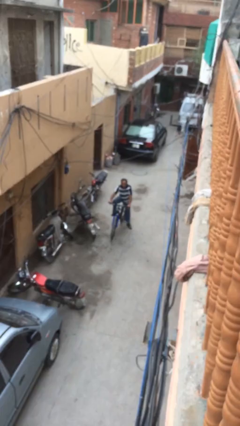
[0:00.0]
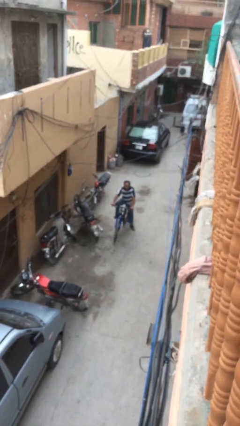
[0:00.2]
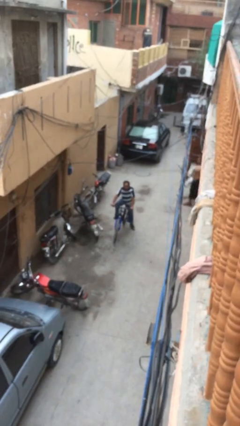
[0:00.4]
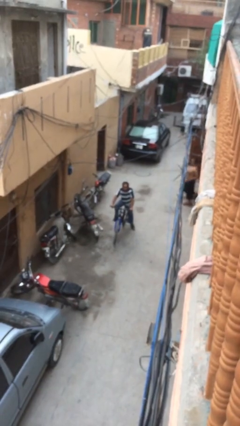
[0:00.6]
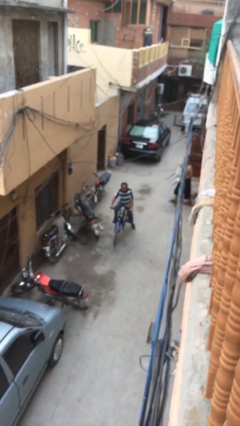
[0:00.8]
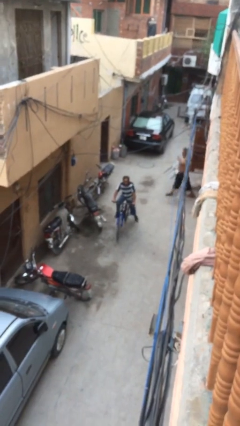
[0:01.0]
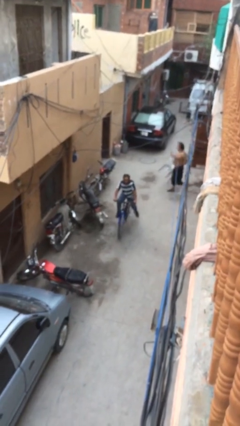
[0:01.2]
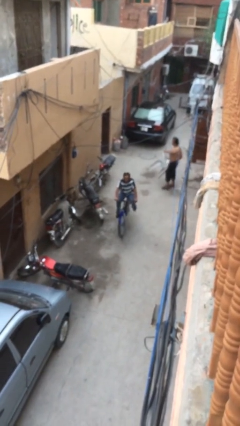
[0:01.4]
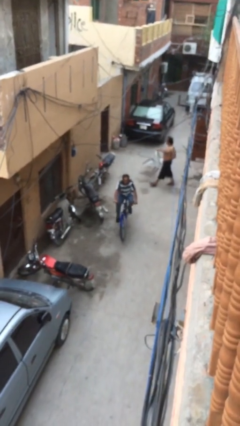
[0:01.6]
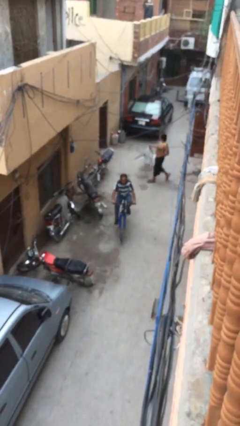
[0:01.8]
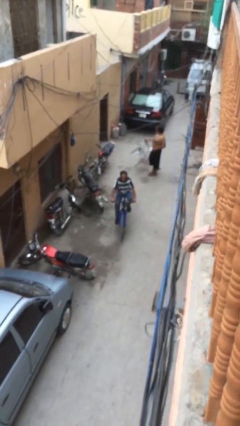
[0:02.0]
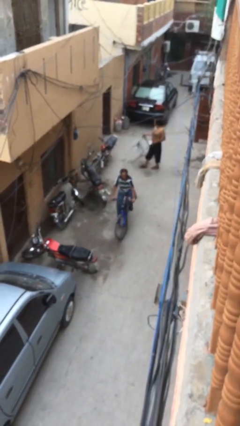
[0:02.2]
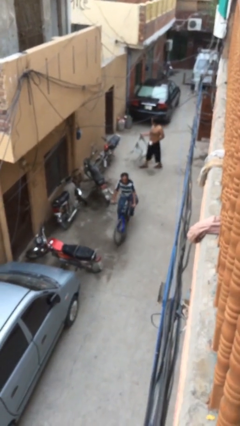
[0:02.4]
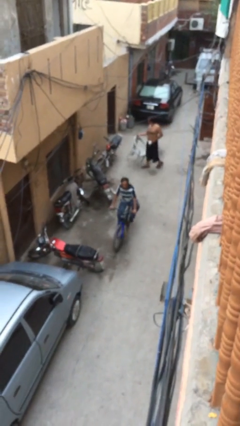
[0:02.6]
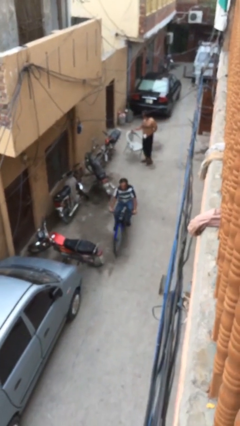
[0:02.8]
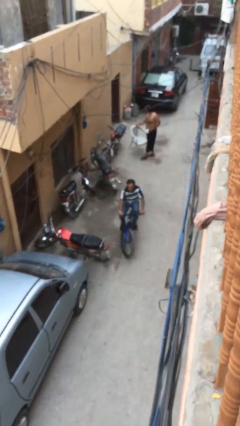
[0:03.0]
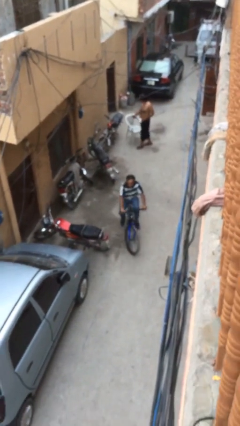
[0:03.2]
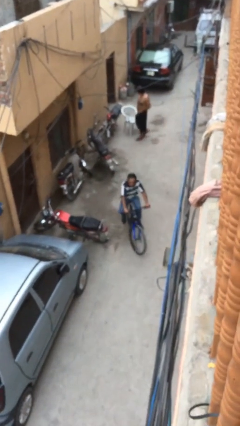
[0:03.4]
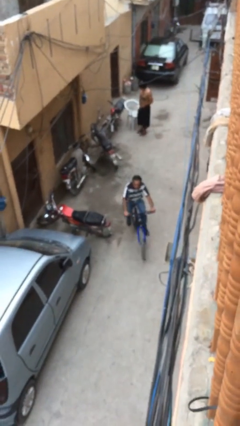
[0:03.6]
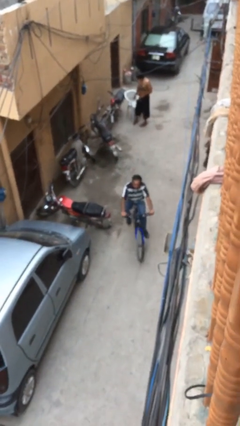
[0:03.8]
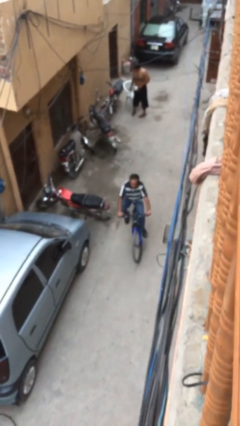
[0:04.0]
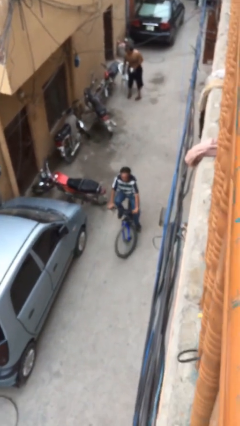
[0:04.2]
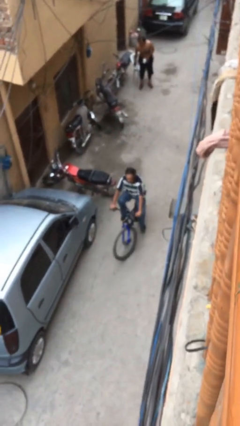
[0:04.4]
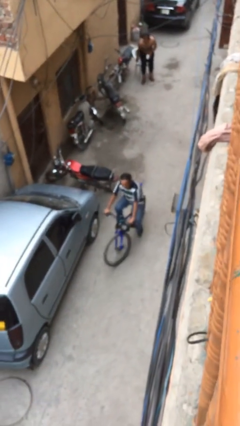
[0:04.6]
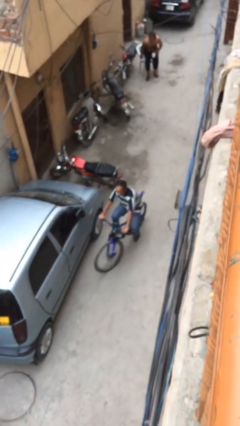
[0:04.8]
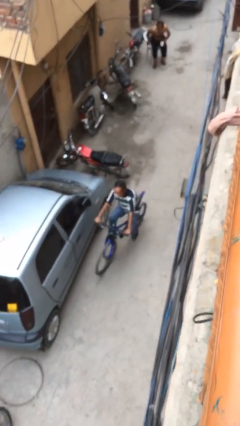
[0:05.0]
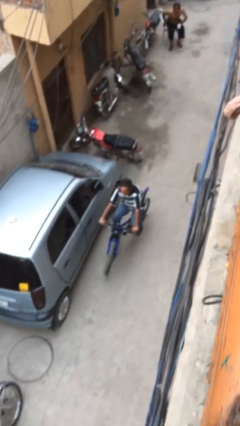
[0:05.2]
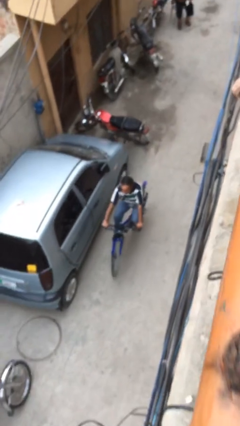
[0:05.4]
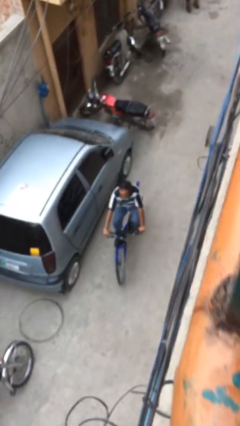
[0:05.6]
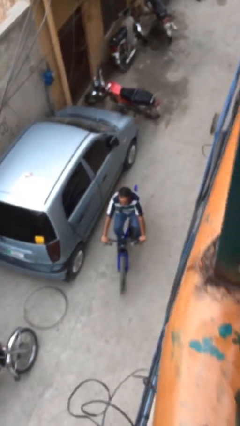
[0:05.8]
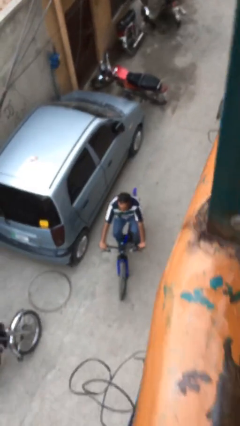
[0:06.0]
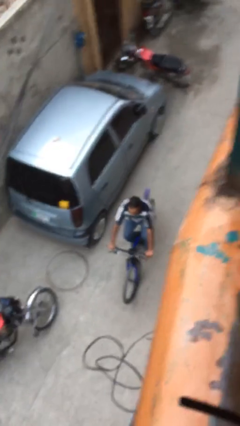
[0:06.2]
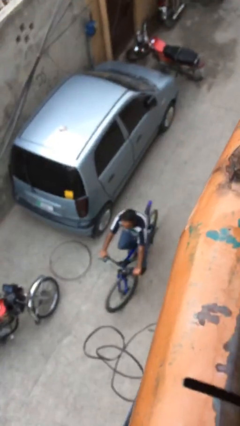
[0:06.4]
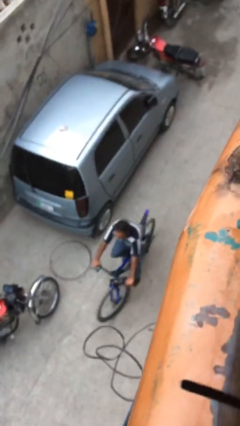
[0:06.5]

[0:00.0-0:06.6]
person rides bicycle

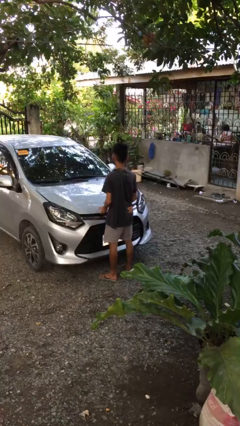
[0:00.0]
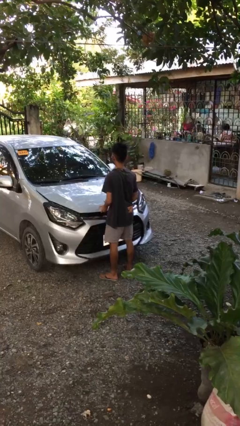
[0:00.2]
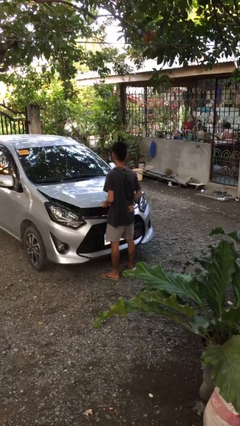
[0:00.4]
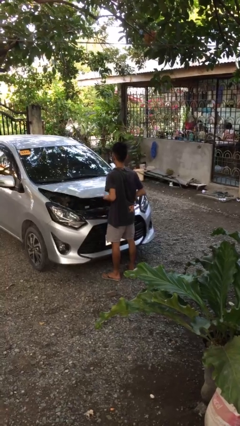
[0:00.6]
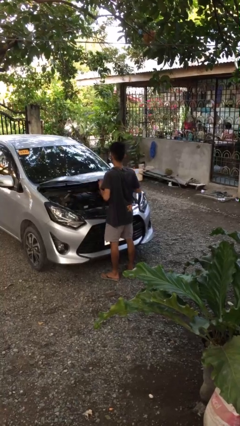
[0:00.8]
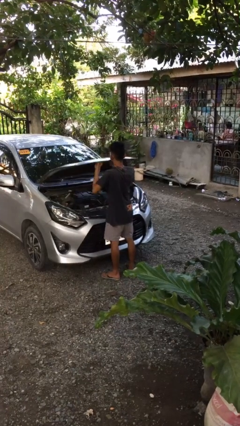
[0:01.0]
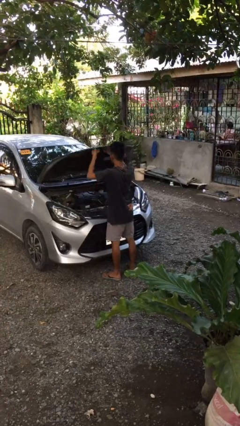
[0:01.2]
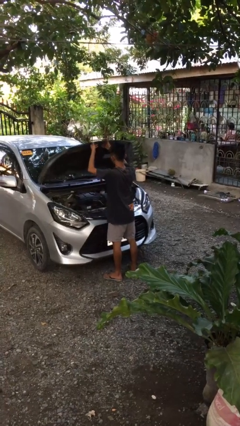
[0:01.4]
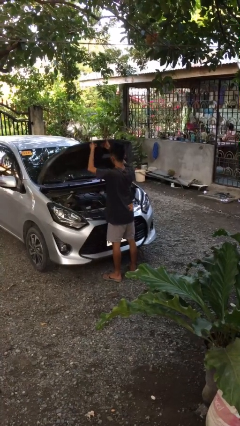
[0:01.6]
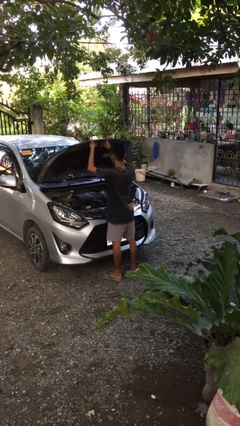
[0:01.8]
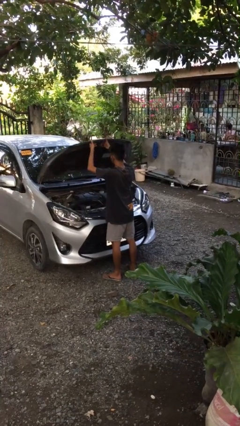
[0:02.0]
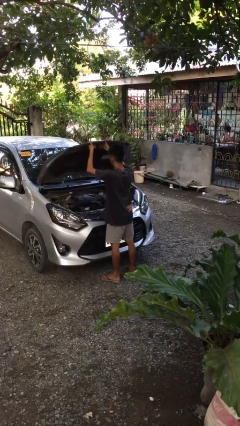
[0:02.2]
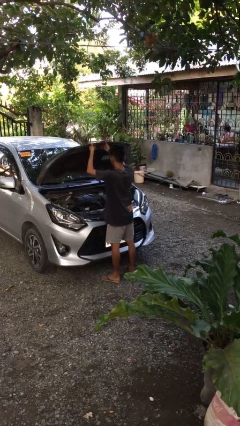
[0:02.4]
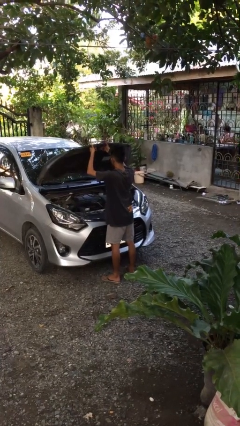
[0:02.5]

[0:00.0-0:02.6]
person opens car hood

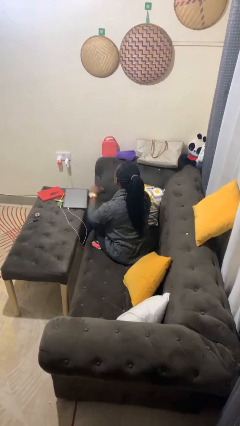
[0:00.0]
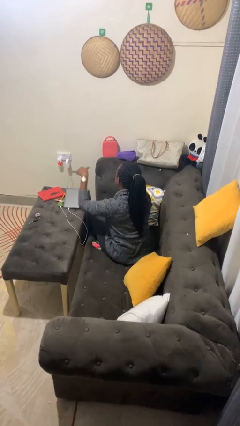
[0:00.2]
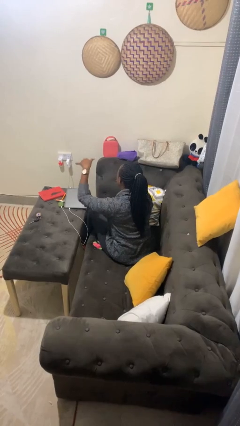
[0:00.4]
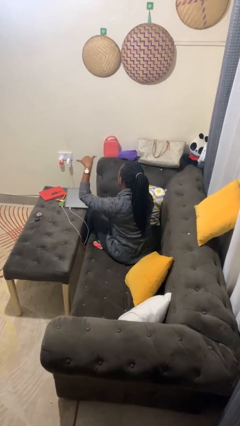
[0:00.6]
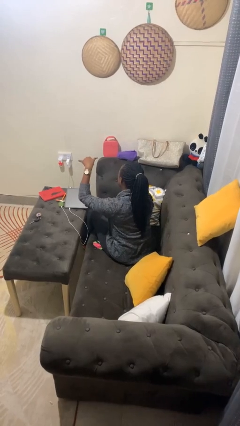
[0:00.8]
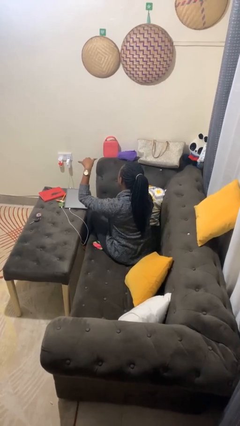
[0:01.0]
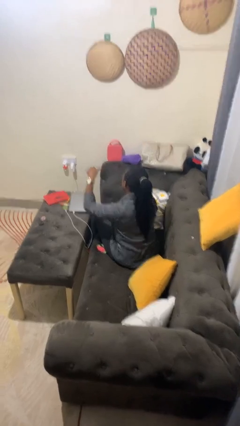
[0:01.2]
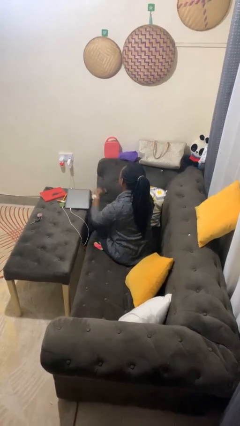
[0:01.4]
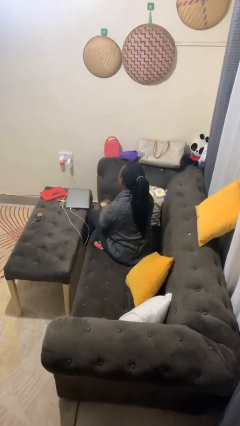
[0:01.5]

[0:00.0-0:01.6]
person gestures hang loose

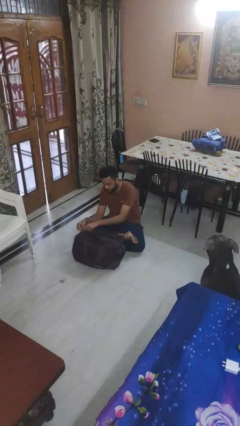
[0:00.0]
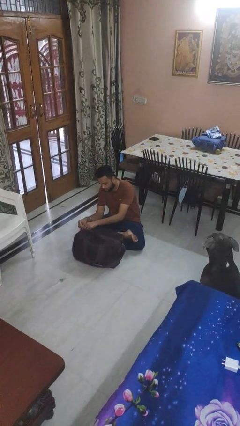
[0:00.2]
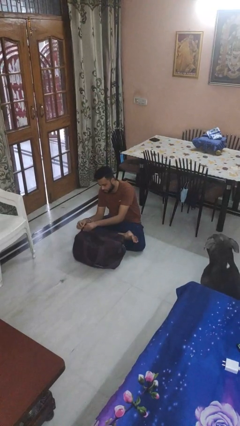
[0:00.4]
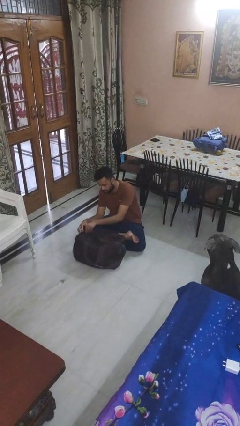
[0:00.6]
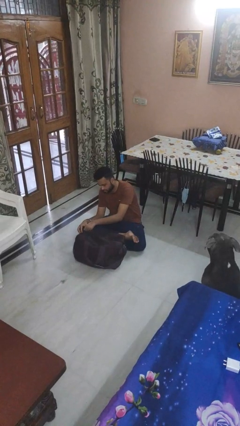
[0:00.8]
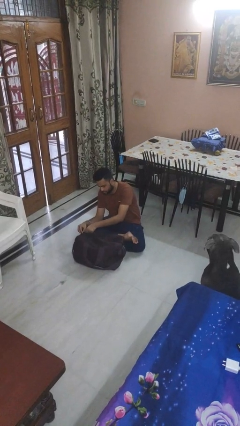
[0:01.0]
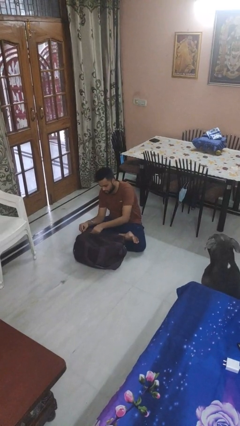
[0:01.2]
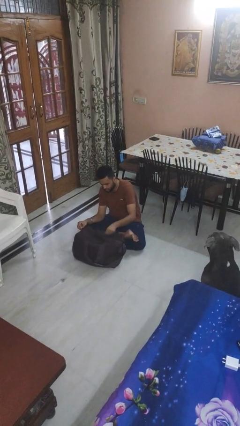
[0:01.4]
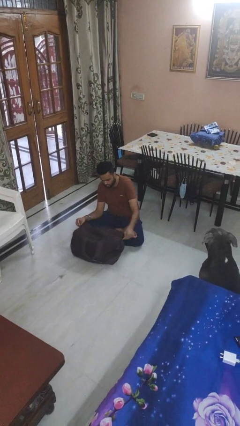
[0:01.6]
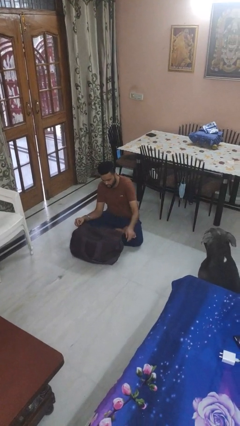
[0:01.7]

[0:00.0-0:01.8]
person closes suitcase

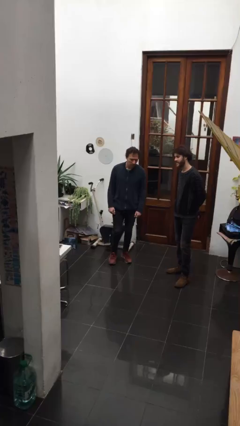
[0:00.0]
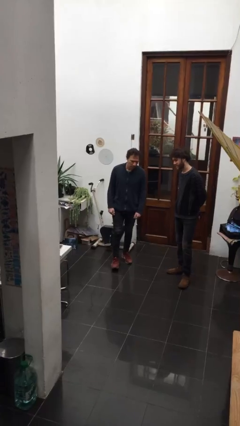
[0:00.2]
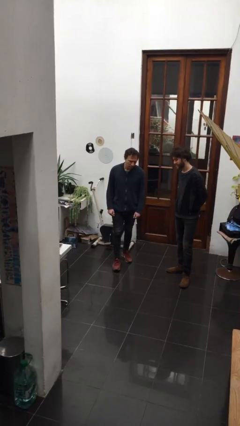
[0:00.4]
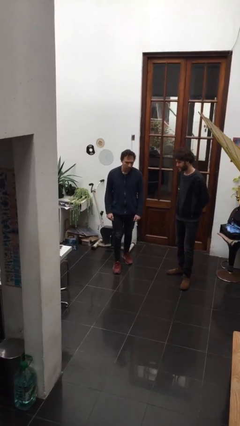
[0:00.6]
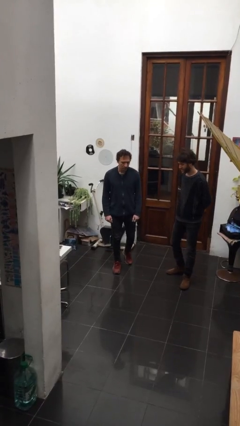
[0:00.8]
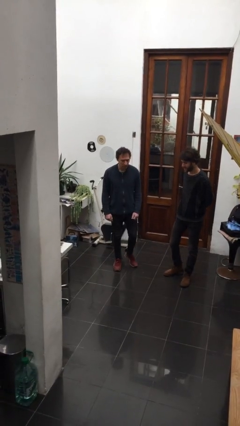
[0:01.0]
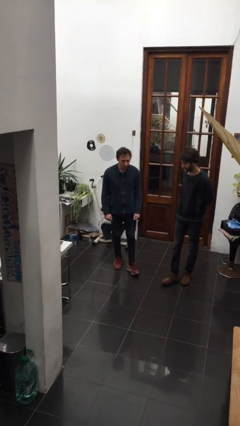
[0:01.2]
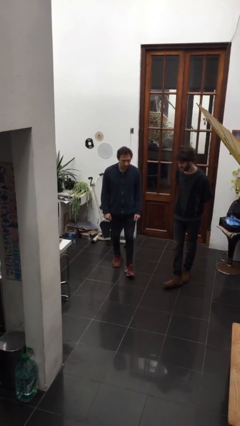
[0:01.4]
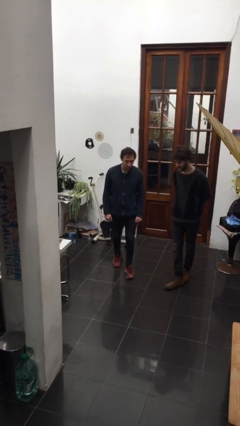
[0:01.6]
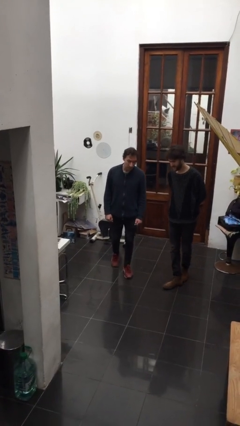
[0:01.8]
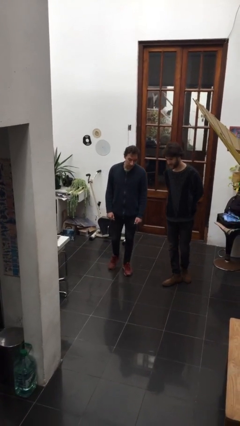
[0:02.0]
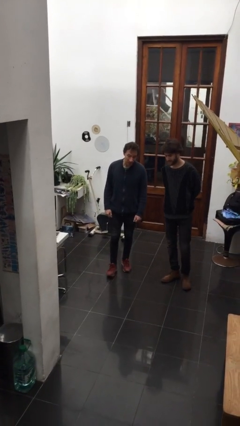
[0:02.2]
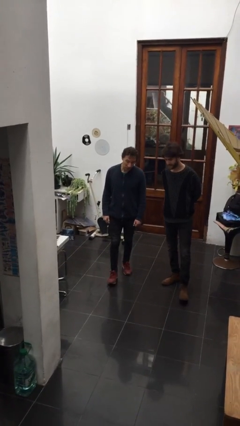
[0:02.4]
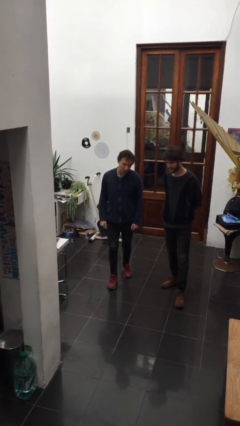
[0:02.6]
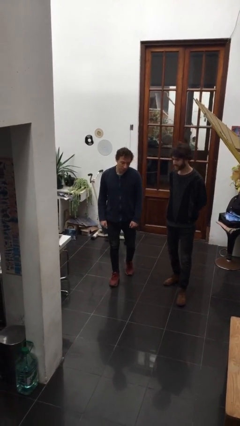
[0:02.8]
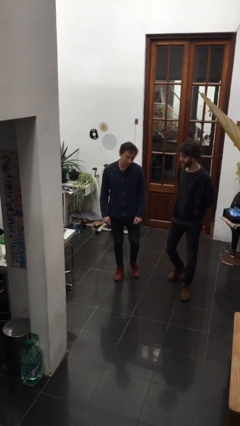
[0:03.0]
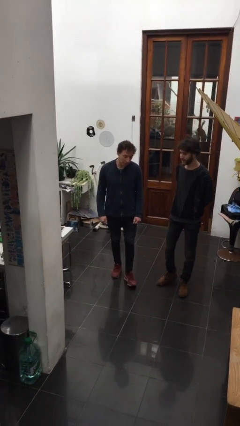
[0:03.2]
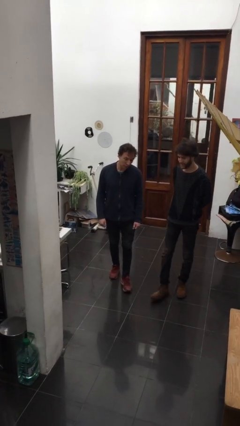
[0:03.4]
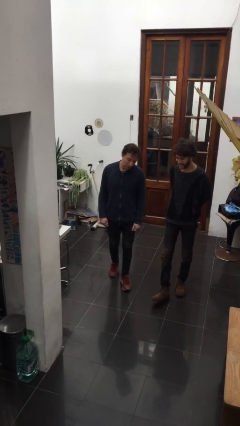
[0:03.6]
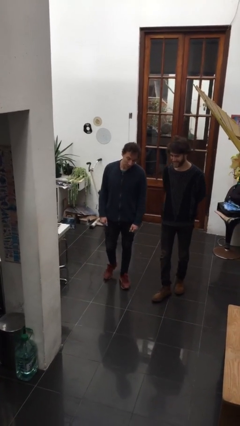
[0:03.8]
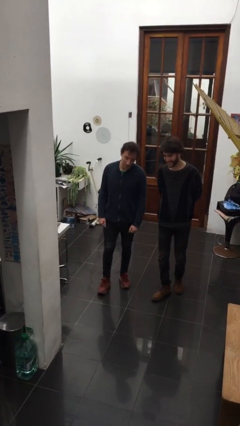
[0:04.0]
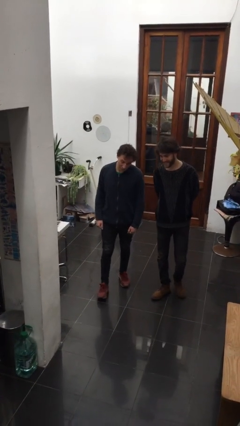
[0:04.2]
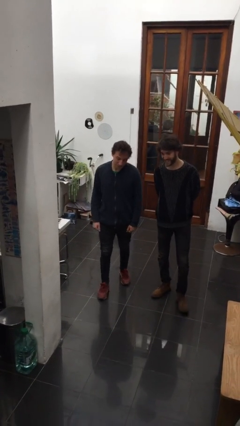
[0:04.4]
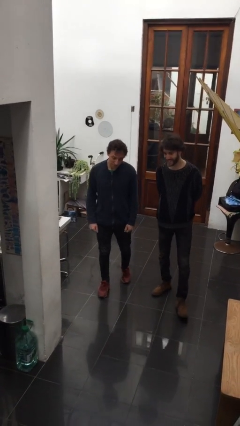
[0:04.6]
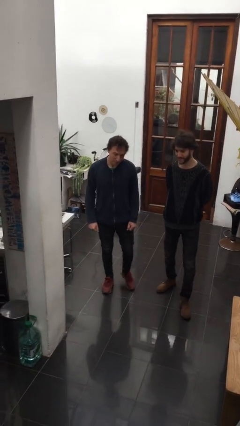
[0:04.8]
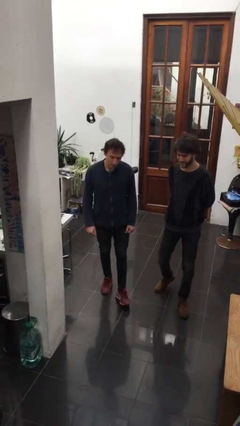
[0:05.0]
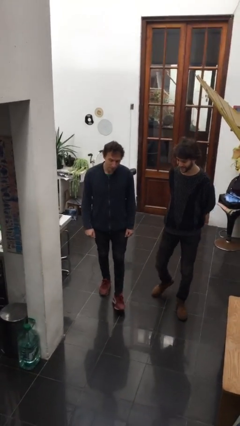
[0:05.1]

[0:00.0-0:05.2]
person talks to person
